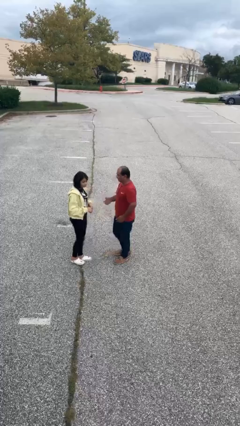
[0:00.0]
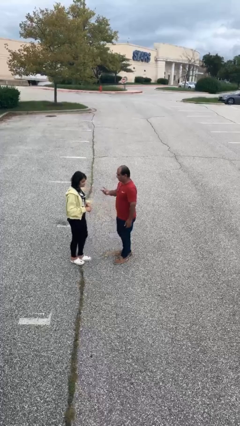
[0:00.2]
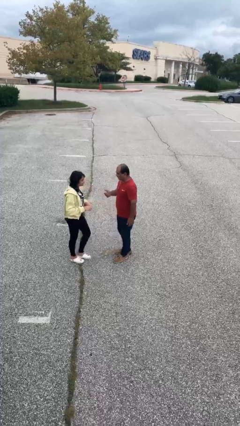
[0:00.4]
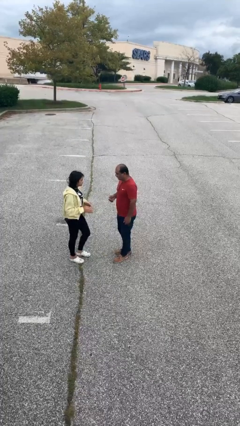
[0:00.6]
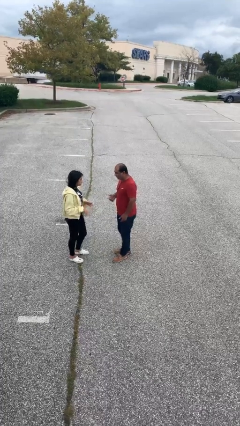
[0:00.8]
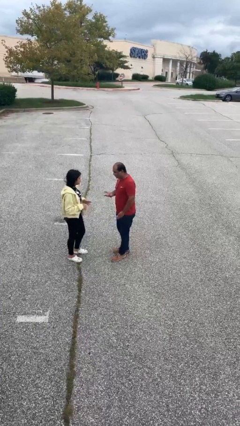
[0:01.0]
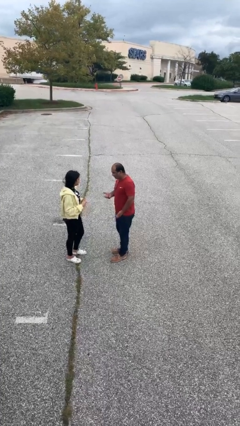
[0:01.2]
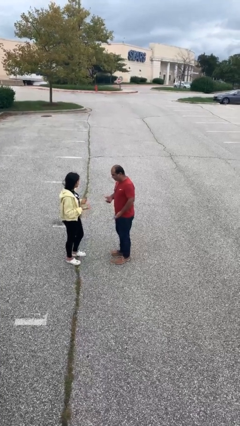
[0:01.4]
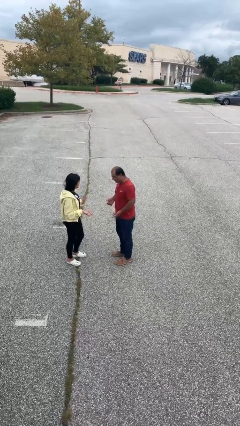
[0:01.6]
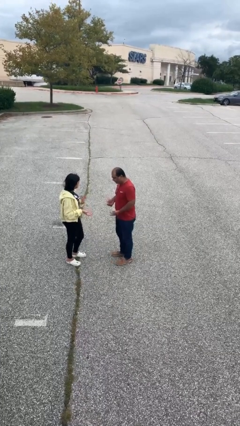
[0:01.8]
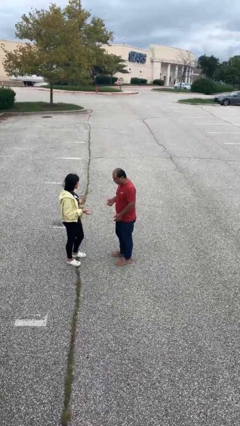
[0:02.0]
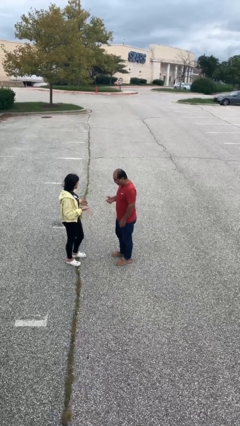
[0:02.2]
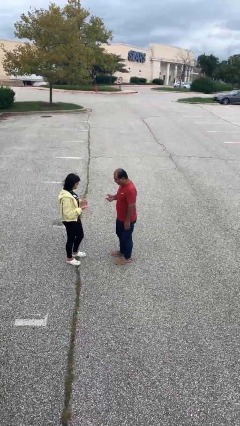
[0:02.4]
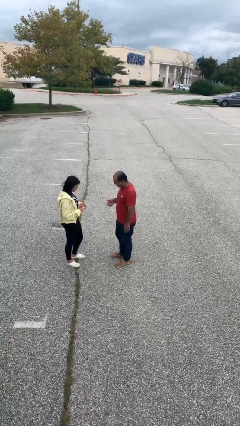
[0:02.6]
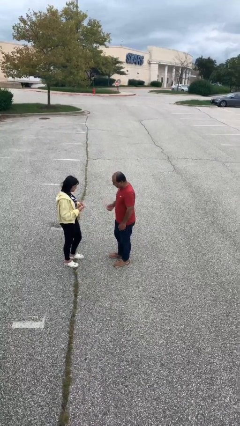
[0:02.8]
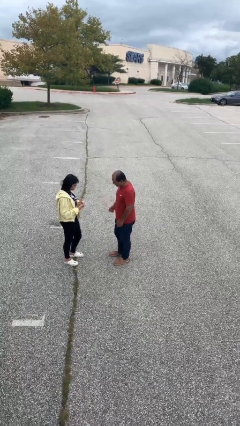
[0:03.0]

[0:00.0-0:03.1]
person talks to person

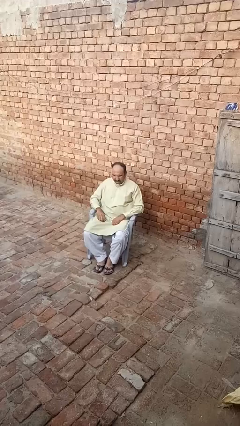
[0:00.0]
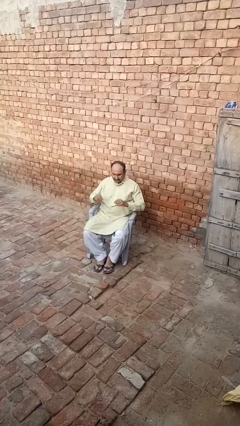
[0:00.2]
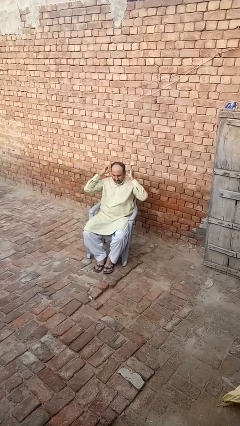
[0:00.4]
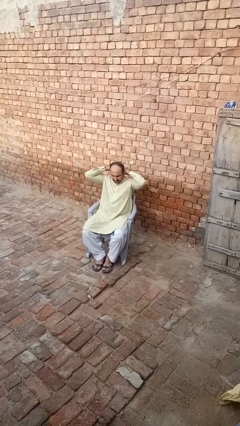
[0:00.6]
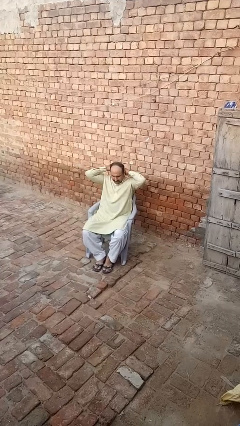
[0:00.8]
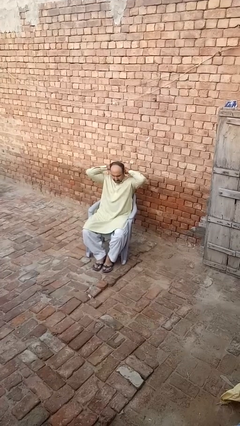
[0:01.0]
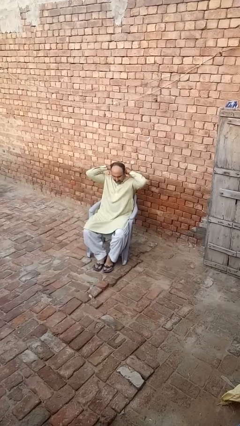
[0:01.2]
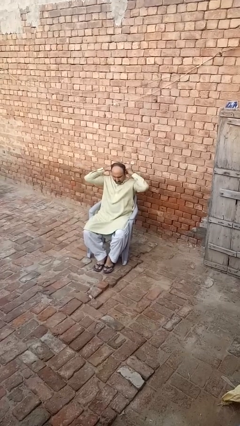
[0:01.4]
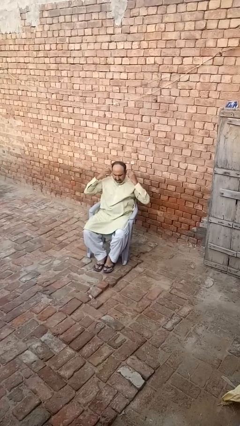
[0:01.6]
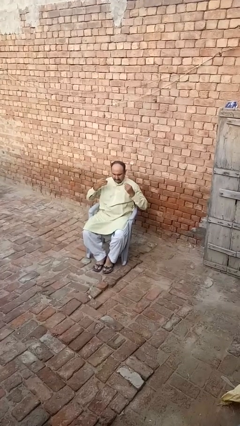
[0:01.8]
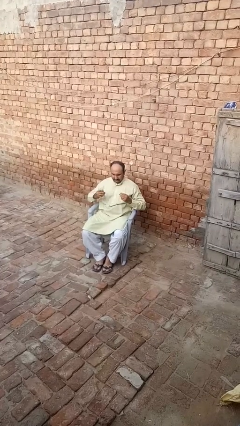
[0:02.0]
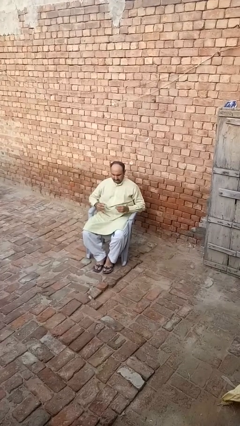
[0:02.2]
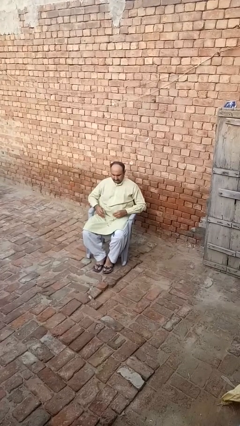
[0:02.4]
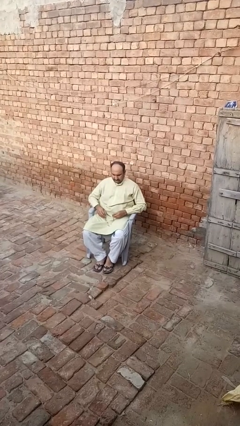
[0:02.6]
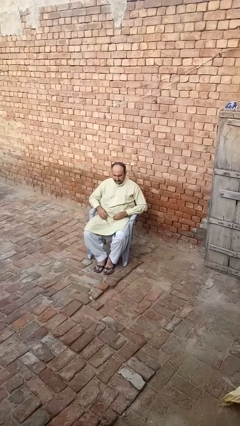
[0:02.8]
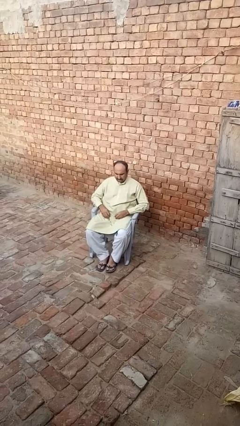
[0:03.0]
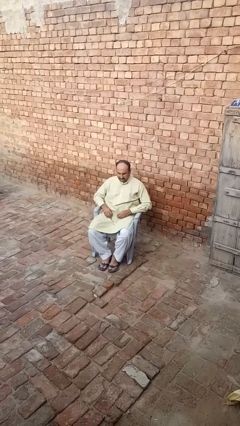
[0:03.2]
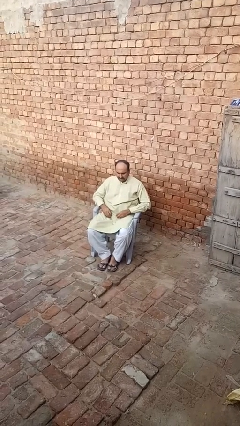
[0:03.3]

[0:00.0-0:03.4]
person takes off necklace

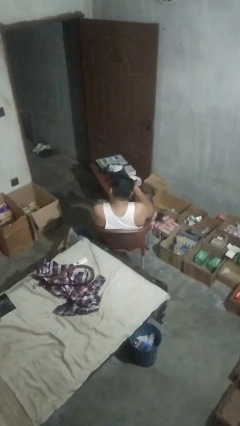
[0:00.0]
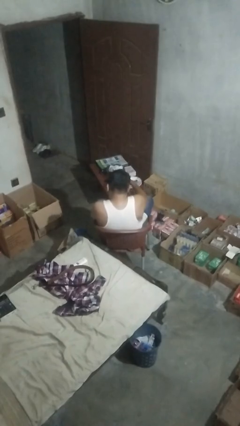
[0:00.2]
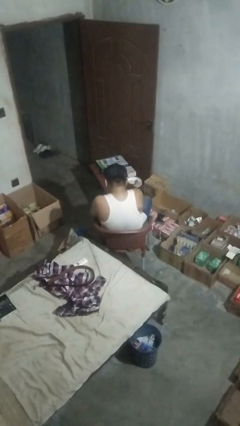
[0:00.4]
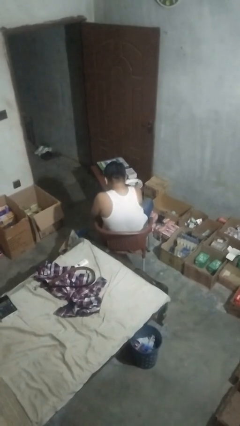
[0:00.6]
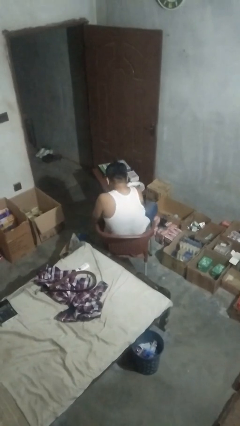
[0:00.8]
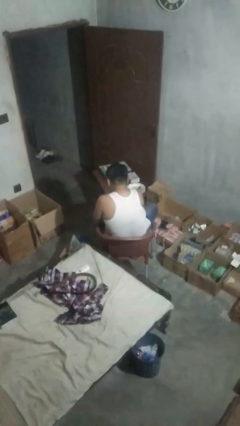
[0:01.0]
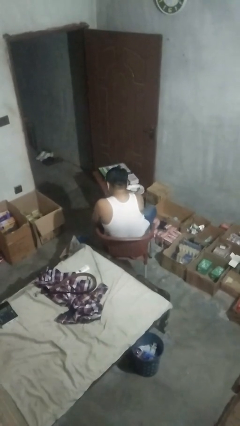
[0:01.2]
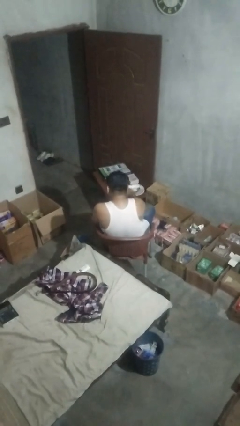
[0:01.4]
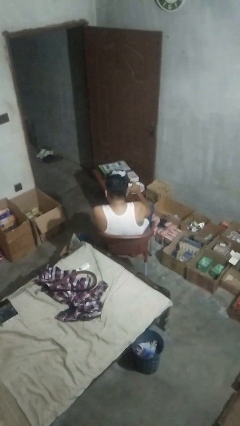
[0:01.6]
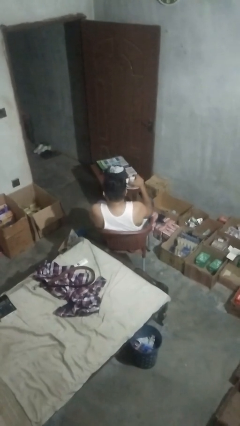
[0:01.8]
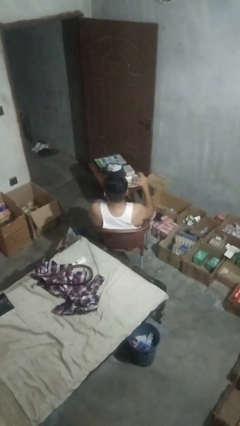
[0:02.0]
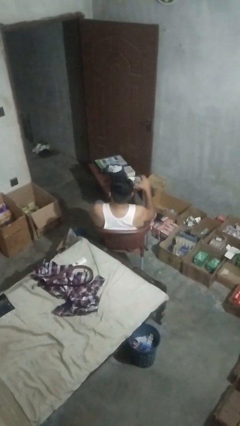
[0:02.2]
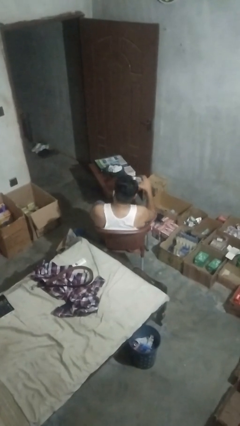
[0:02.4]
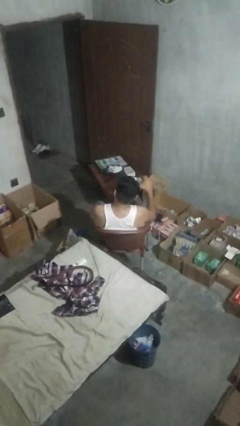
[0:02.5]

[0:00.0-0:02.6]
person picks up object from table

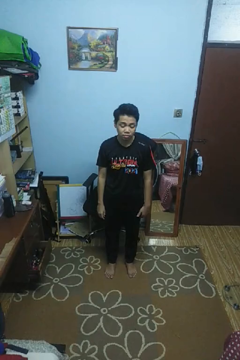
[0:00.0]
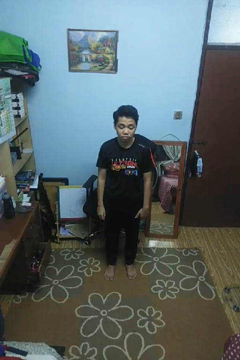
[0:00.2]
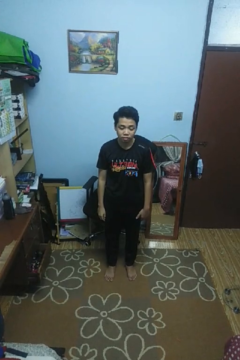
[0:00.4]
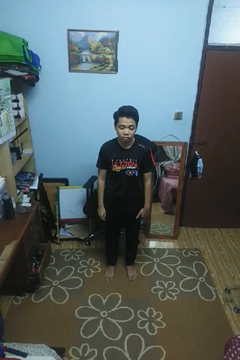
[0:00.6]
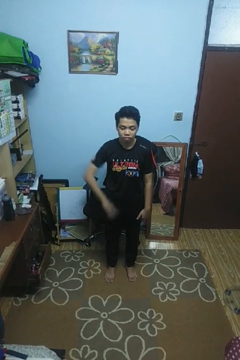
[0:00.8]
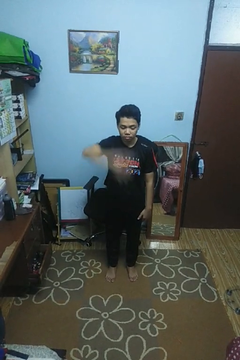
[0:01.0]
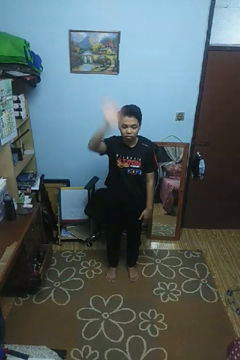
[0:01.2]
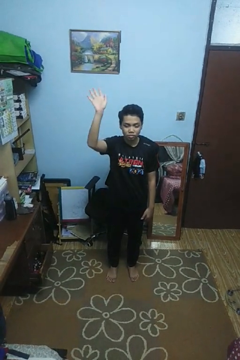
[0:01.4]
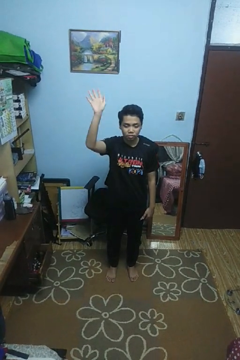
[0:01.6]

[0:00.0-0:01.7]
person gestures swipe up

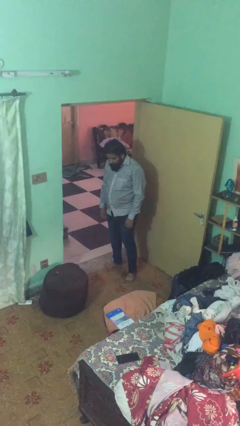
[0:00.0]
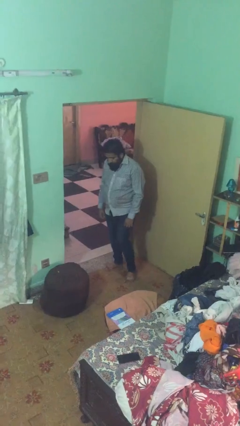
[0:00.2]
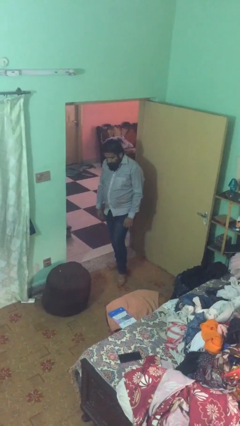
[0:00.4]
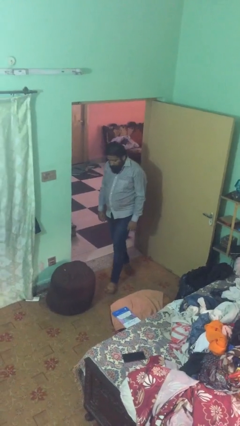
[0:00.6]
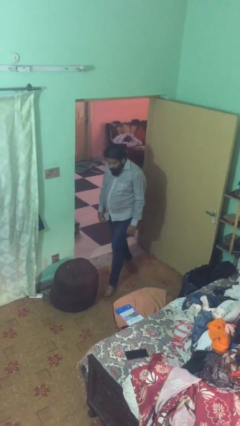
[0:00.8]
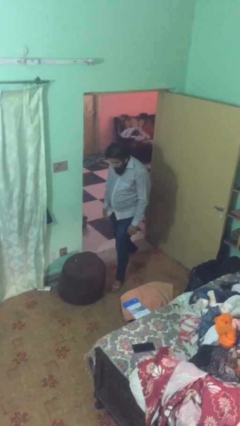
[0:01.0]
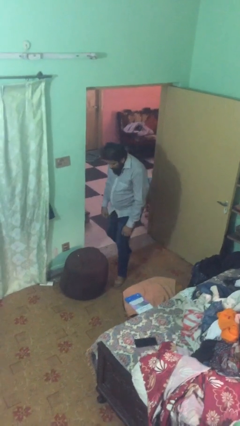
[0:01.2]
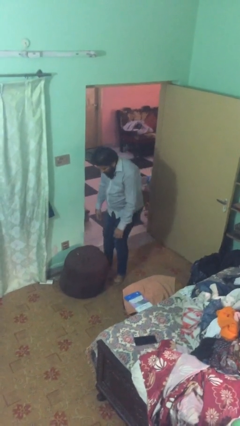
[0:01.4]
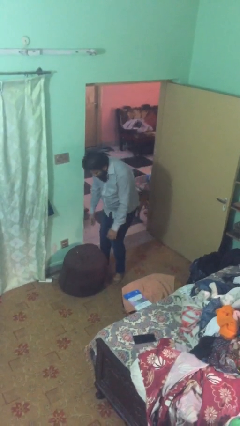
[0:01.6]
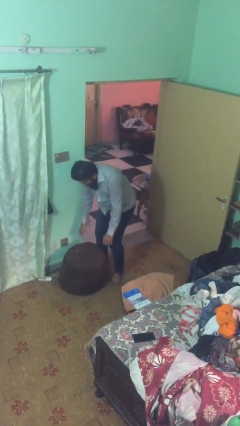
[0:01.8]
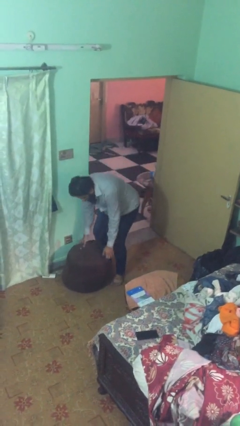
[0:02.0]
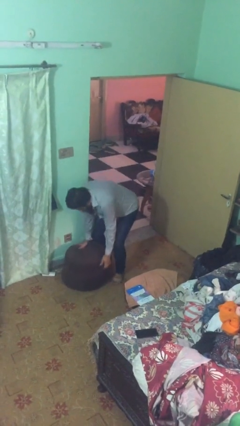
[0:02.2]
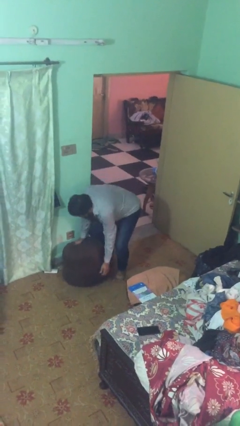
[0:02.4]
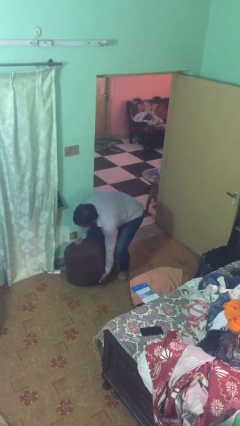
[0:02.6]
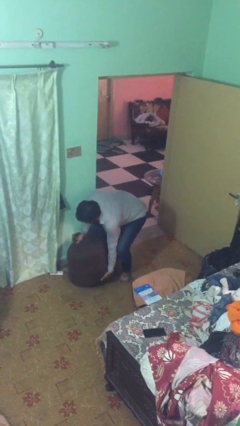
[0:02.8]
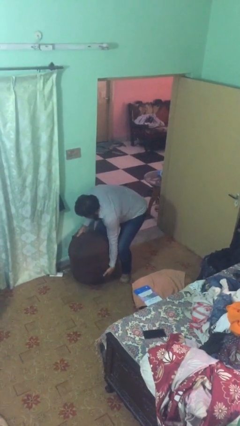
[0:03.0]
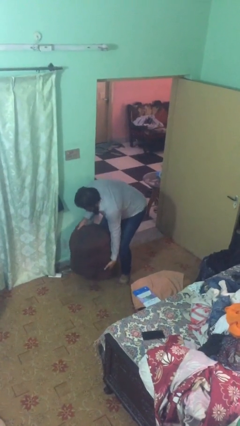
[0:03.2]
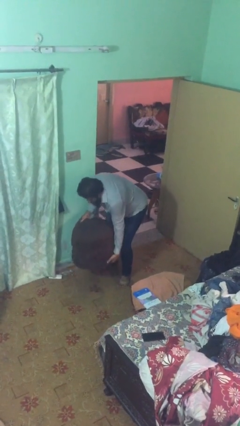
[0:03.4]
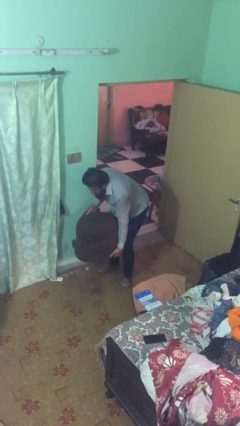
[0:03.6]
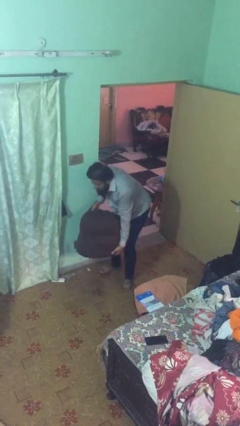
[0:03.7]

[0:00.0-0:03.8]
person picks up object from floor

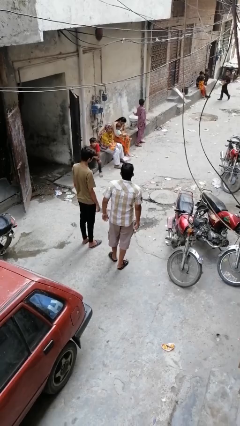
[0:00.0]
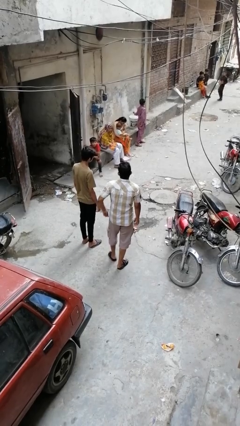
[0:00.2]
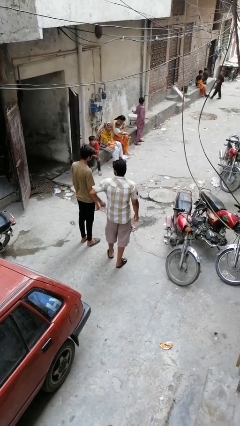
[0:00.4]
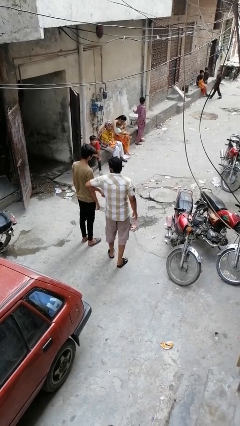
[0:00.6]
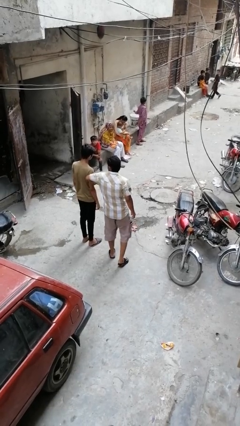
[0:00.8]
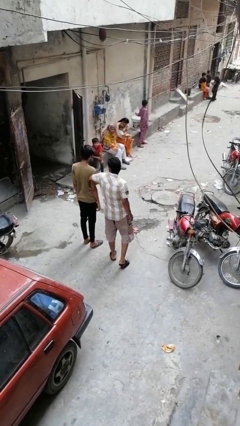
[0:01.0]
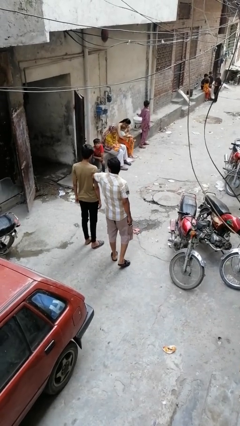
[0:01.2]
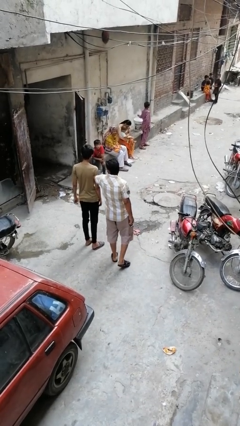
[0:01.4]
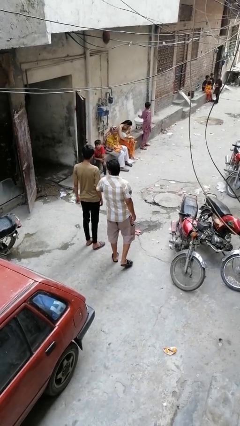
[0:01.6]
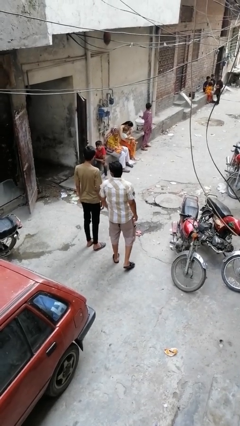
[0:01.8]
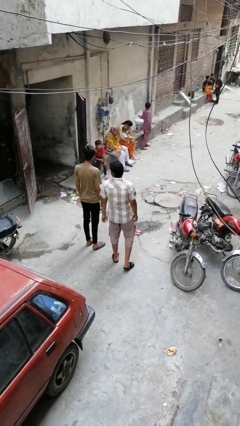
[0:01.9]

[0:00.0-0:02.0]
person nudges person with elbow

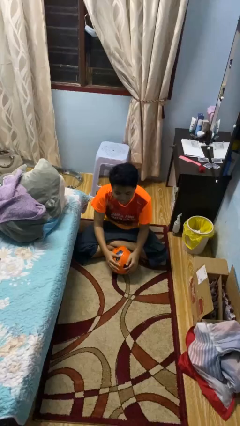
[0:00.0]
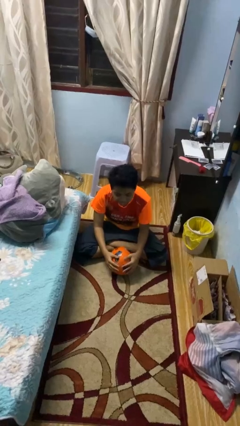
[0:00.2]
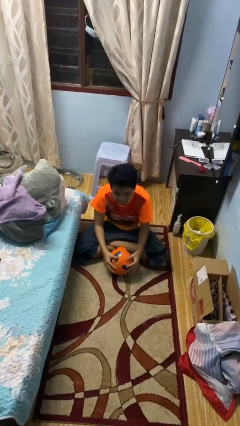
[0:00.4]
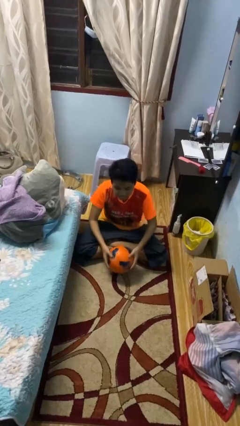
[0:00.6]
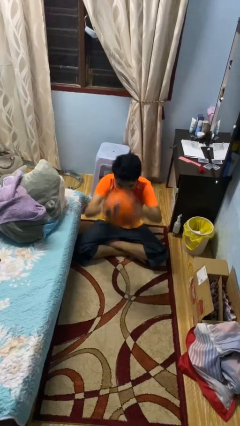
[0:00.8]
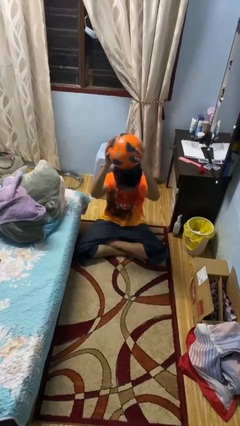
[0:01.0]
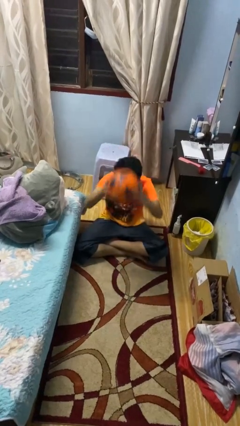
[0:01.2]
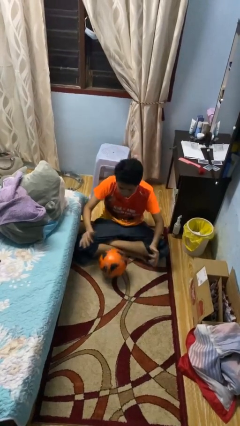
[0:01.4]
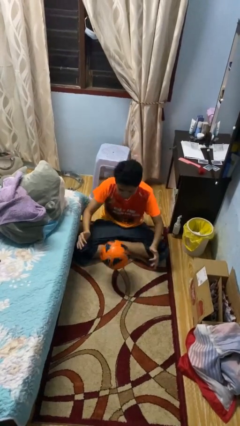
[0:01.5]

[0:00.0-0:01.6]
person bounces ball on floor
